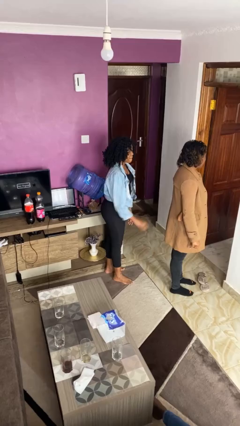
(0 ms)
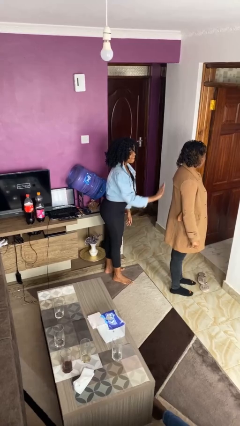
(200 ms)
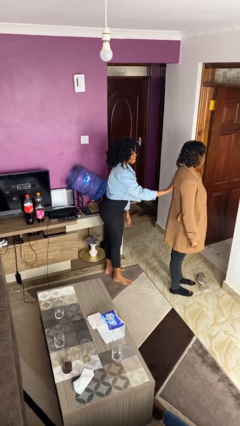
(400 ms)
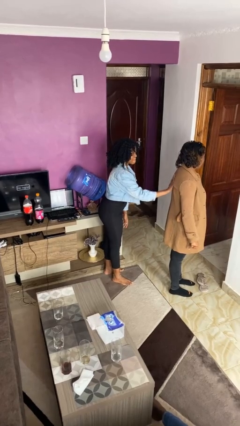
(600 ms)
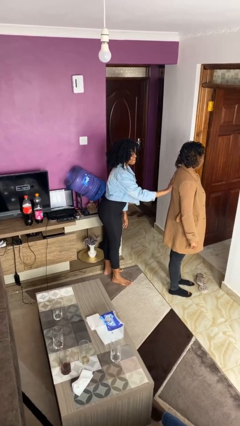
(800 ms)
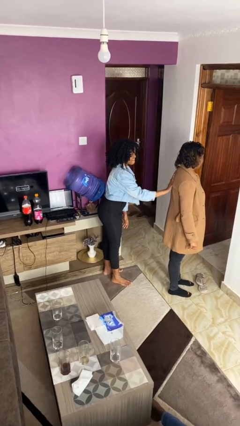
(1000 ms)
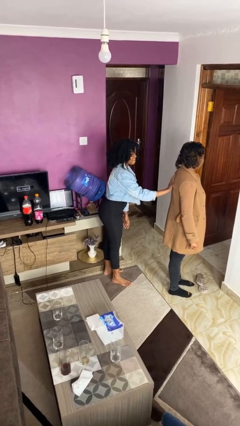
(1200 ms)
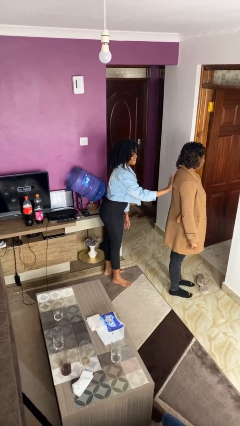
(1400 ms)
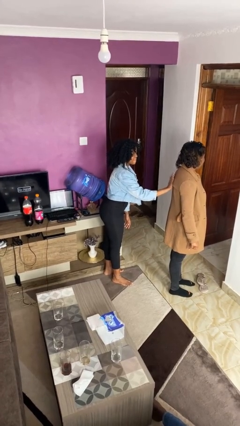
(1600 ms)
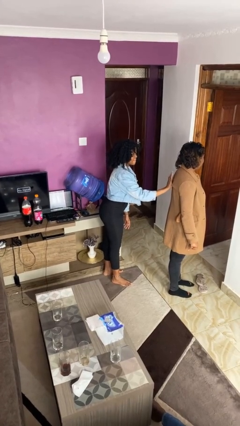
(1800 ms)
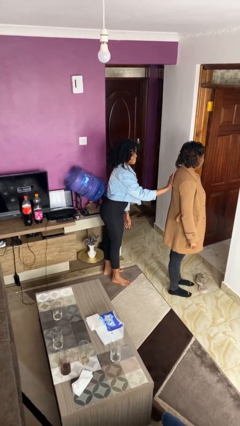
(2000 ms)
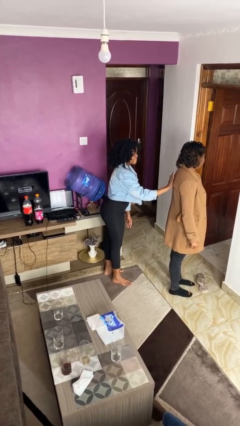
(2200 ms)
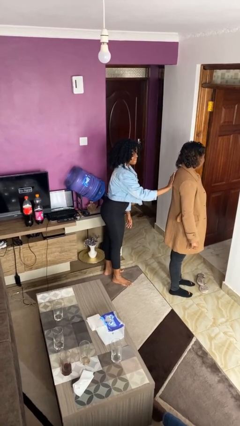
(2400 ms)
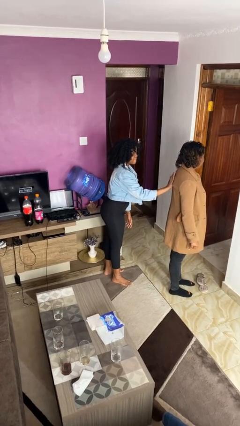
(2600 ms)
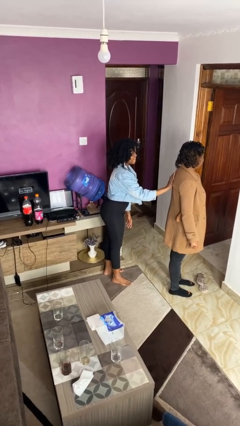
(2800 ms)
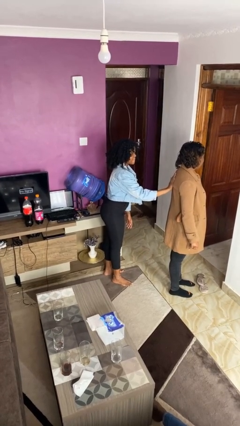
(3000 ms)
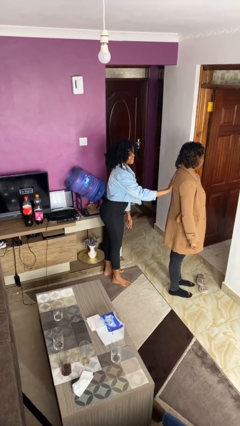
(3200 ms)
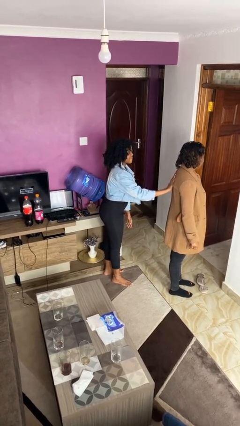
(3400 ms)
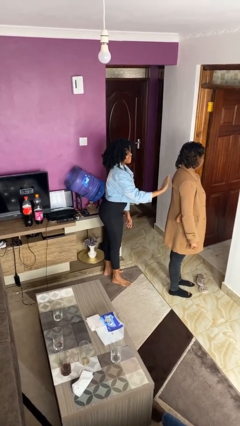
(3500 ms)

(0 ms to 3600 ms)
person touches back of person

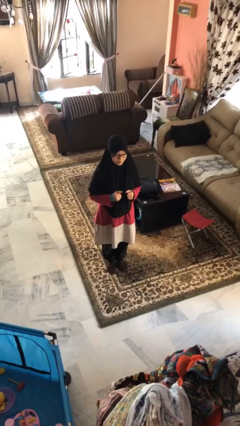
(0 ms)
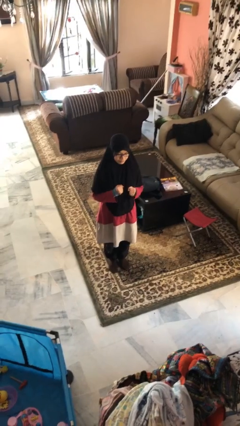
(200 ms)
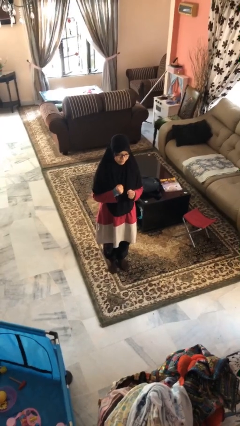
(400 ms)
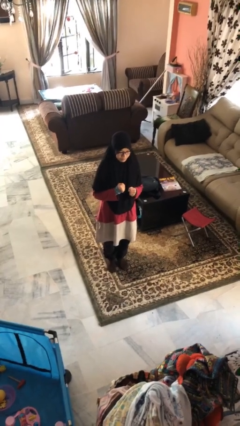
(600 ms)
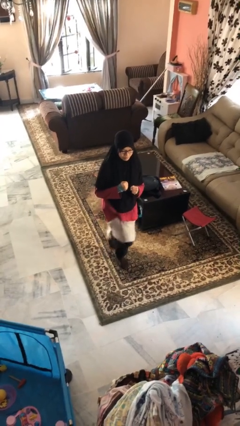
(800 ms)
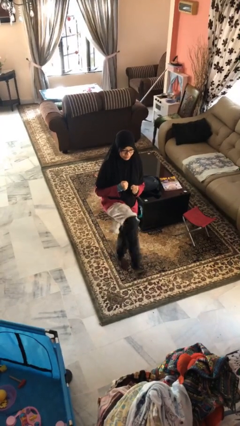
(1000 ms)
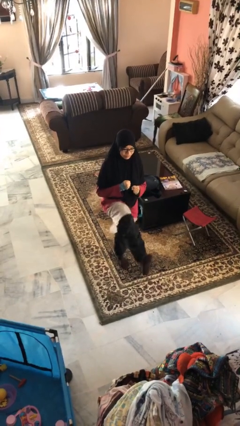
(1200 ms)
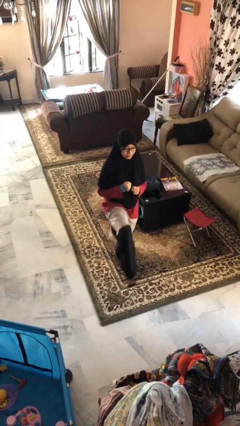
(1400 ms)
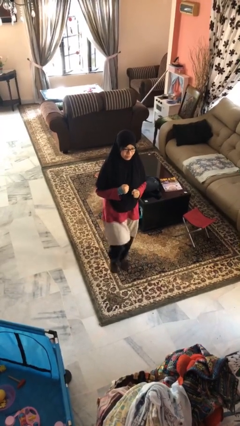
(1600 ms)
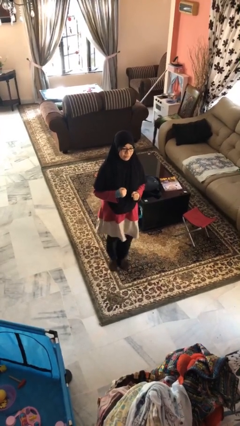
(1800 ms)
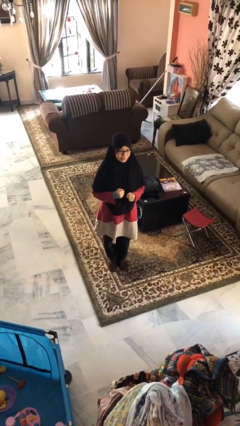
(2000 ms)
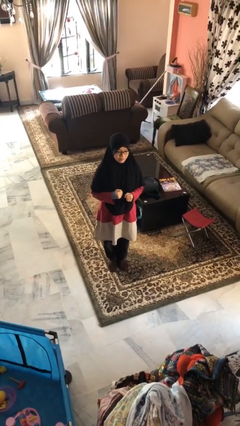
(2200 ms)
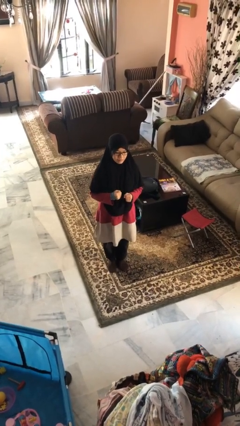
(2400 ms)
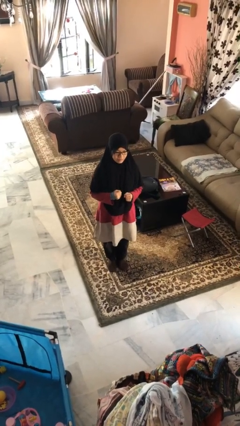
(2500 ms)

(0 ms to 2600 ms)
person karate kicks

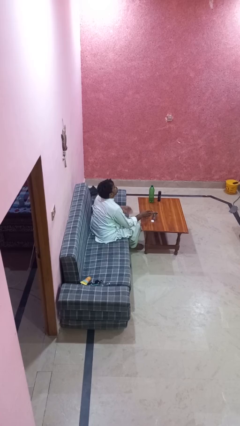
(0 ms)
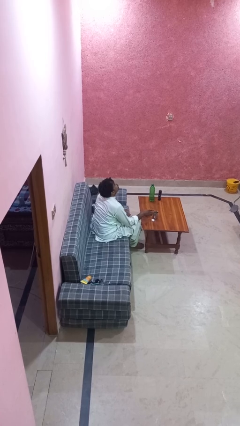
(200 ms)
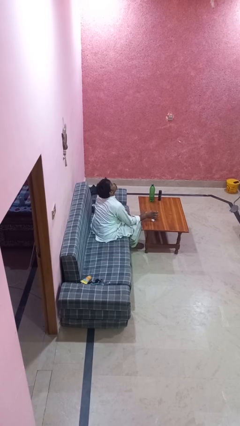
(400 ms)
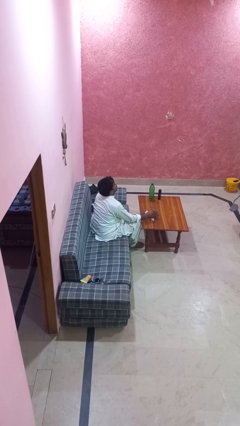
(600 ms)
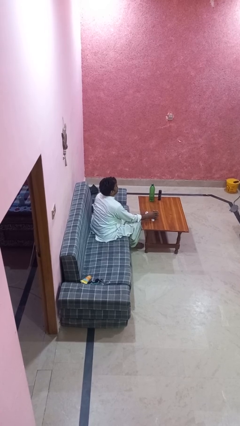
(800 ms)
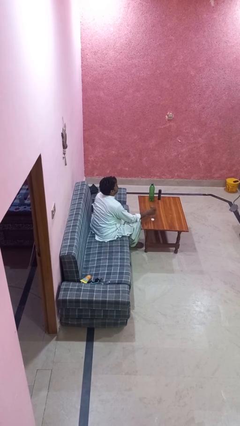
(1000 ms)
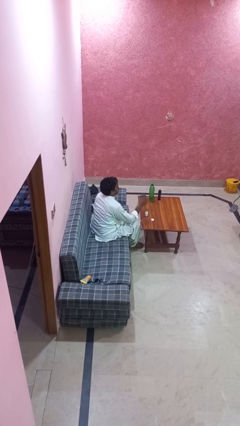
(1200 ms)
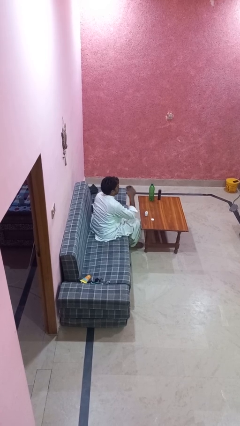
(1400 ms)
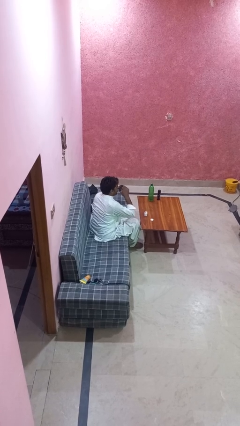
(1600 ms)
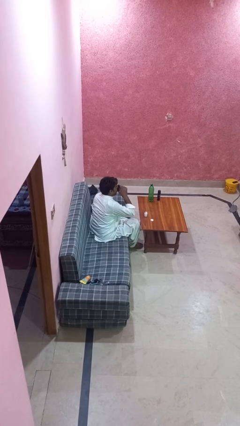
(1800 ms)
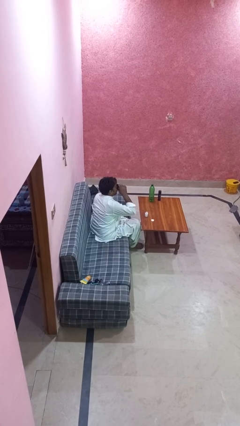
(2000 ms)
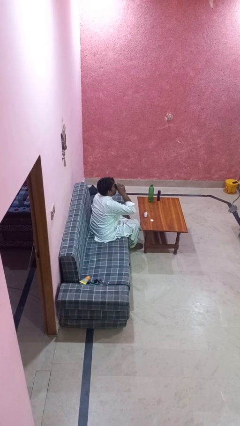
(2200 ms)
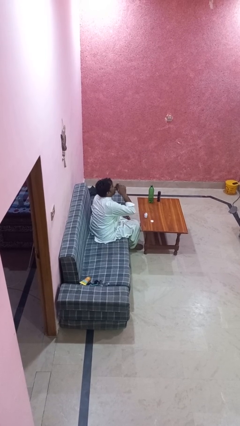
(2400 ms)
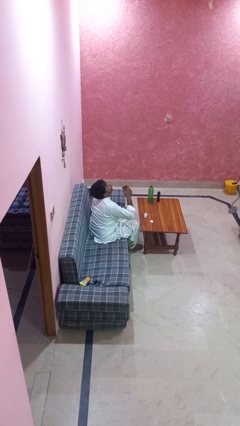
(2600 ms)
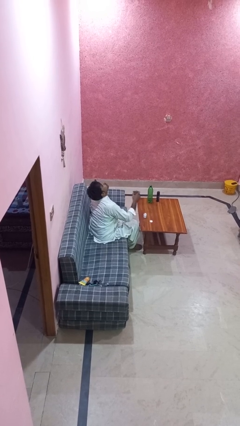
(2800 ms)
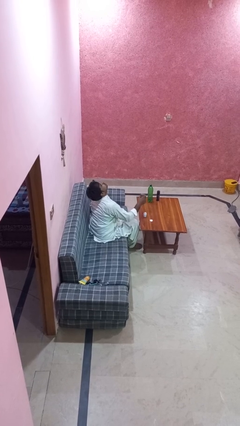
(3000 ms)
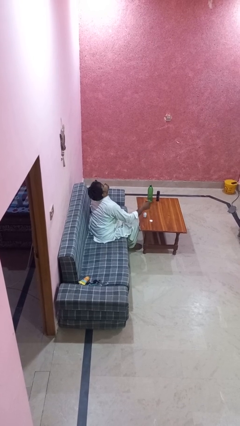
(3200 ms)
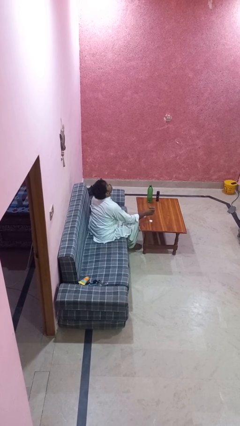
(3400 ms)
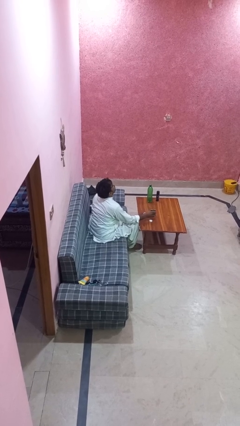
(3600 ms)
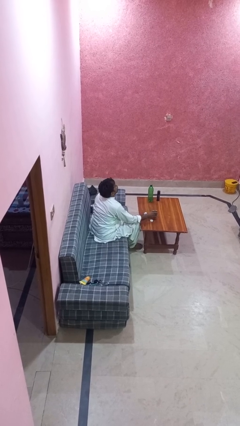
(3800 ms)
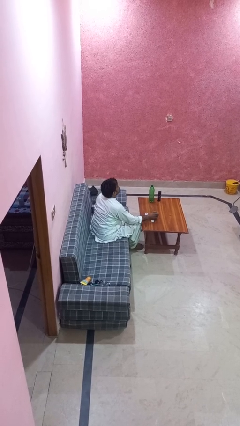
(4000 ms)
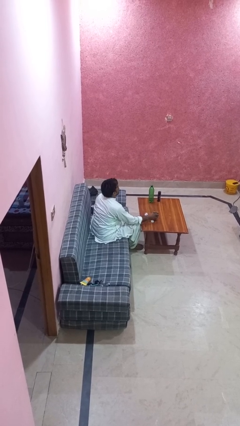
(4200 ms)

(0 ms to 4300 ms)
person drinks from cup

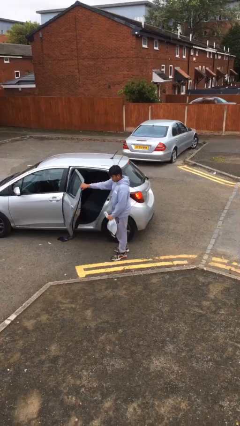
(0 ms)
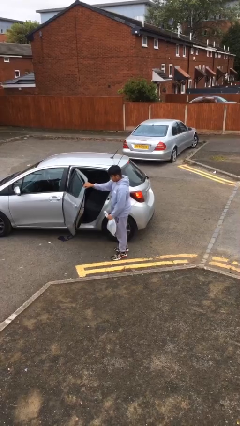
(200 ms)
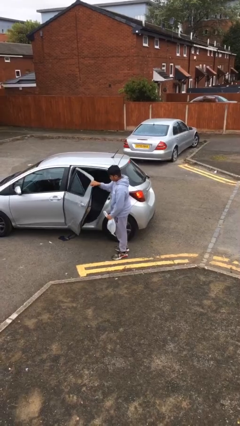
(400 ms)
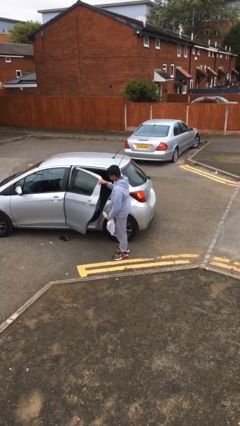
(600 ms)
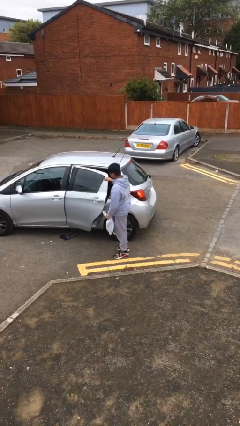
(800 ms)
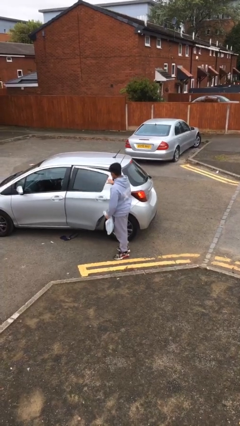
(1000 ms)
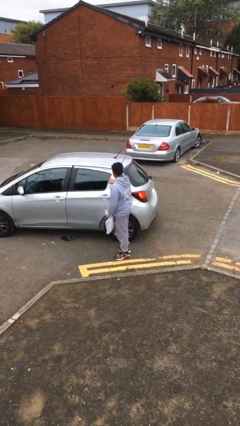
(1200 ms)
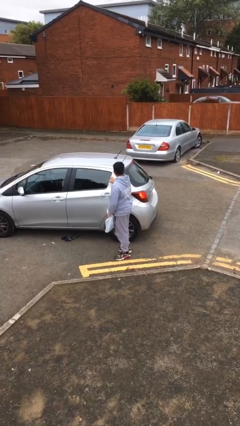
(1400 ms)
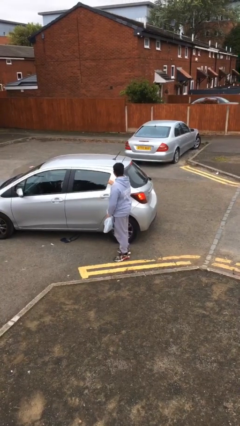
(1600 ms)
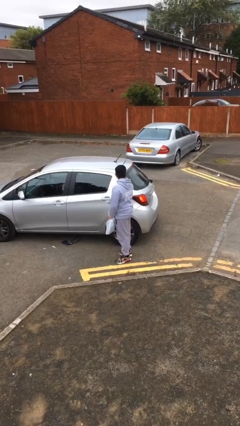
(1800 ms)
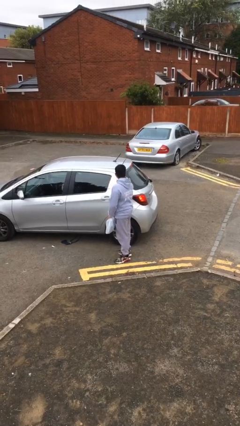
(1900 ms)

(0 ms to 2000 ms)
person closes car door

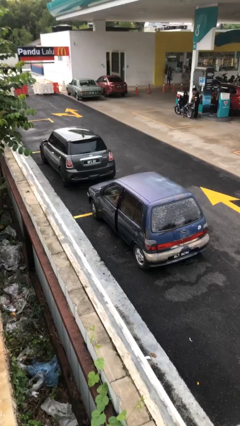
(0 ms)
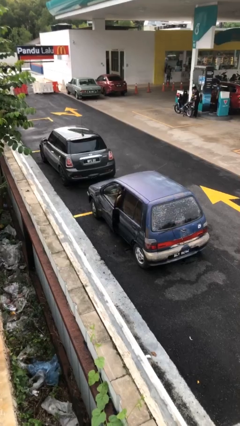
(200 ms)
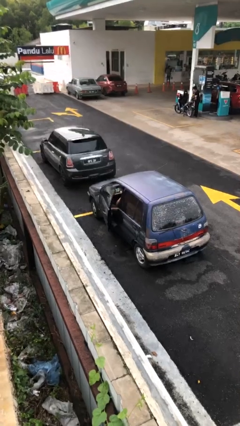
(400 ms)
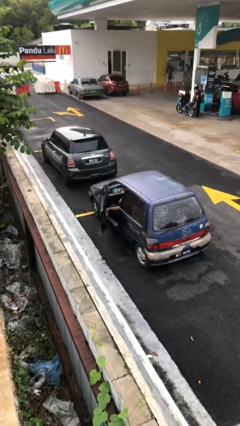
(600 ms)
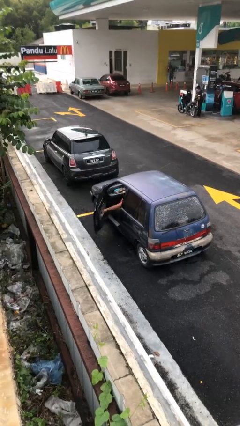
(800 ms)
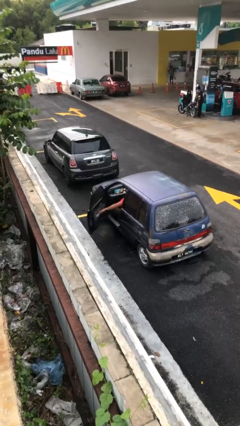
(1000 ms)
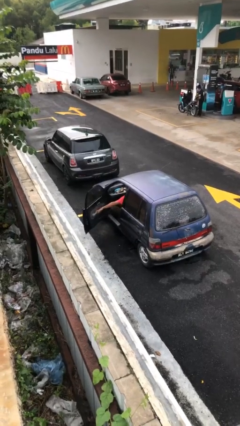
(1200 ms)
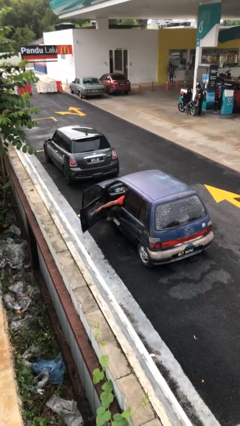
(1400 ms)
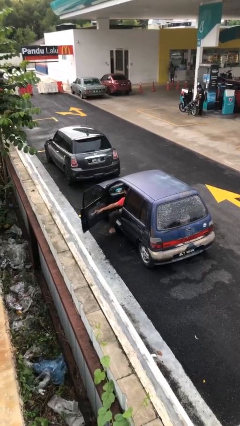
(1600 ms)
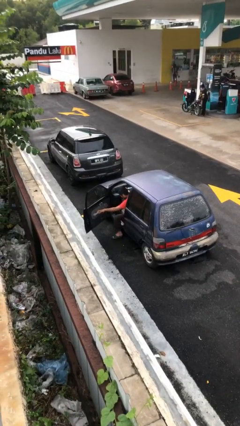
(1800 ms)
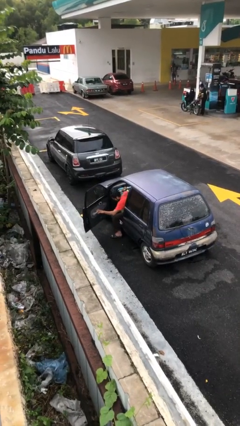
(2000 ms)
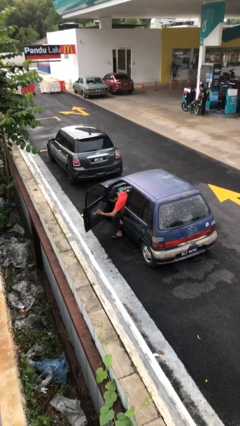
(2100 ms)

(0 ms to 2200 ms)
person opens car door

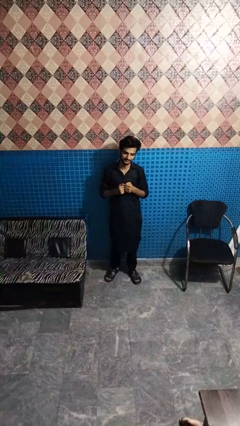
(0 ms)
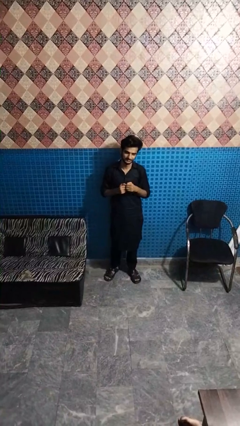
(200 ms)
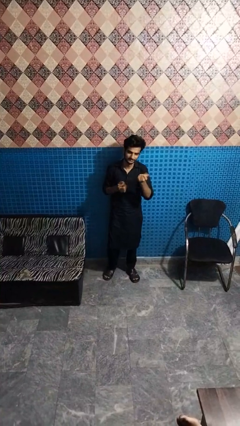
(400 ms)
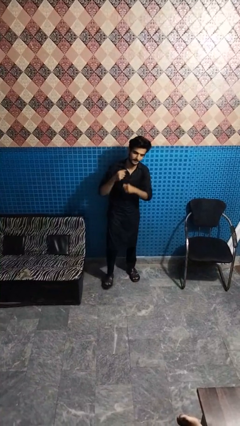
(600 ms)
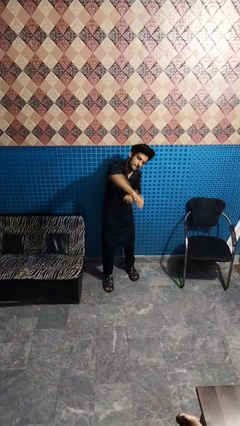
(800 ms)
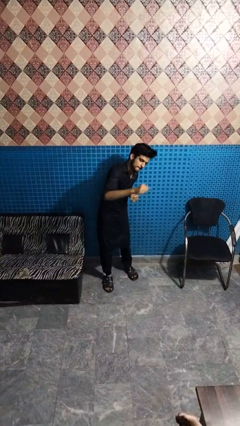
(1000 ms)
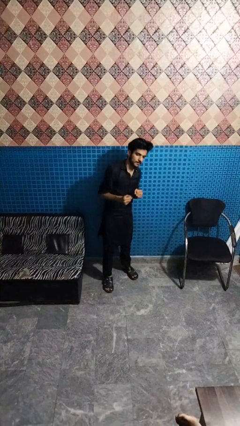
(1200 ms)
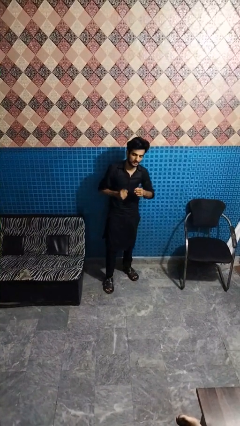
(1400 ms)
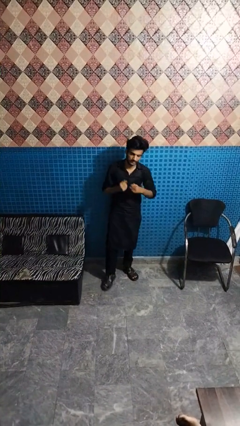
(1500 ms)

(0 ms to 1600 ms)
person punches

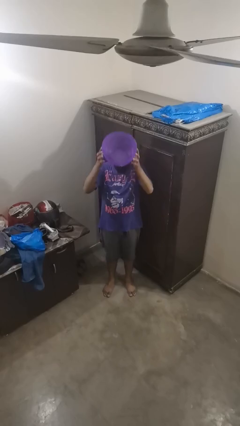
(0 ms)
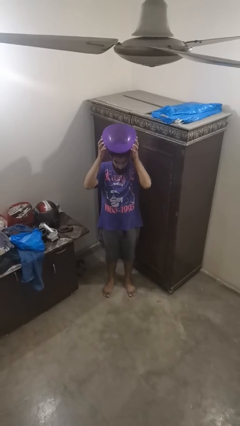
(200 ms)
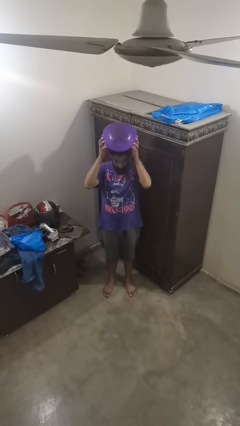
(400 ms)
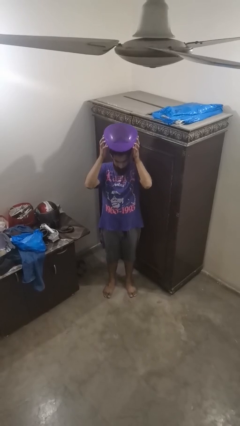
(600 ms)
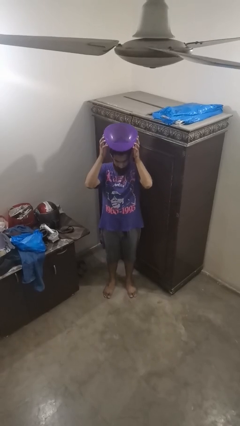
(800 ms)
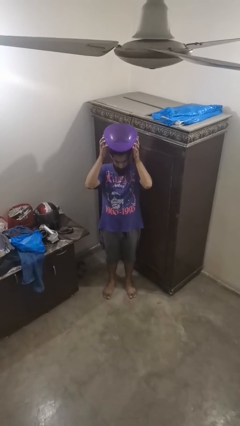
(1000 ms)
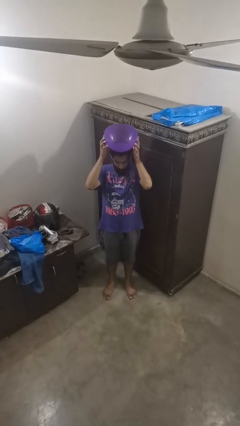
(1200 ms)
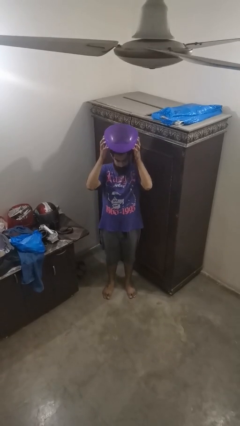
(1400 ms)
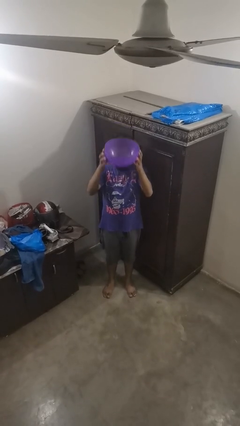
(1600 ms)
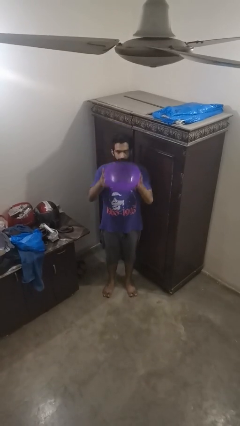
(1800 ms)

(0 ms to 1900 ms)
person holds object above head
